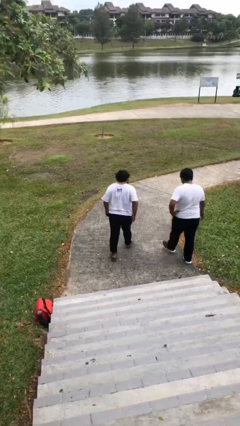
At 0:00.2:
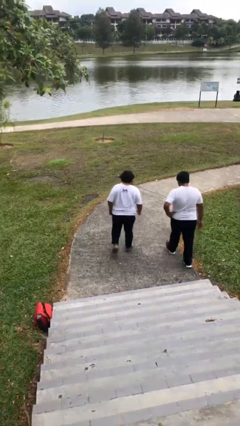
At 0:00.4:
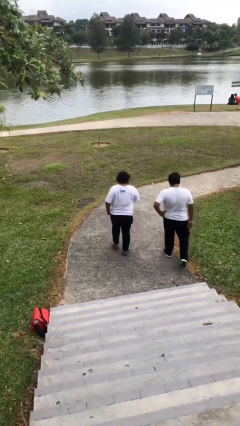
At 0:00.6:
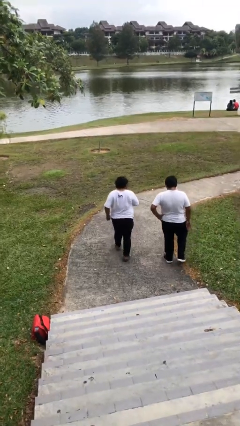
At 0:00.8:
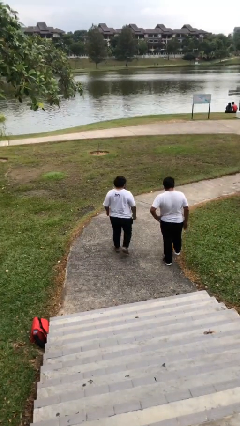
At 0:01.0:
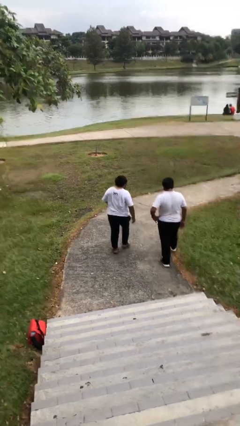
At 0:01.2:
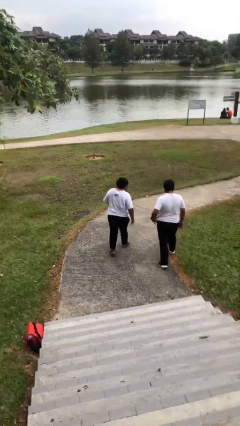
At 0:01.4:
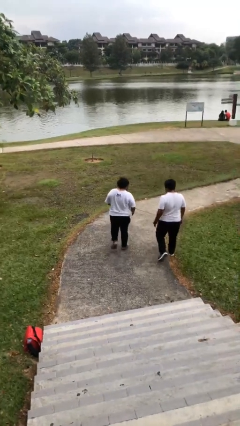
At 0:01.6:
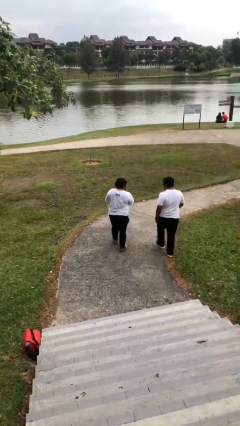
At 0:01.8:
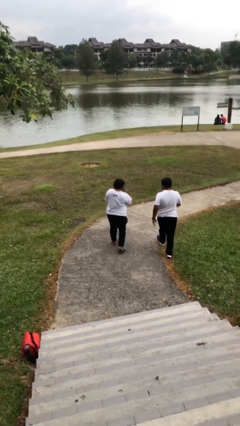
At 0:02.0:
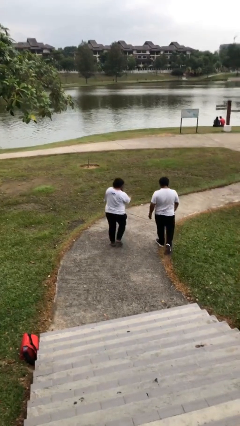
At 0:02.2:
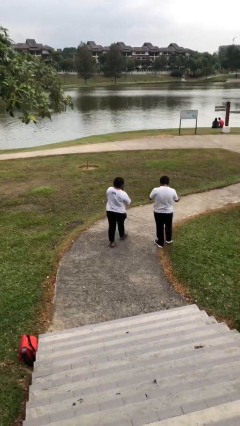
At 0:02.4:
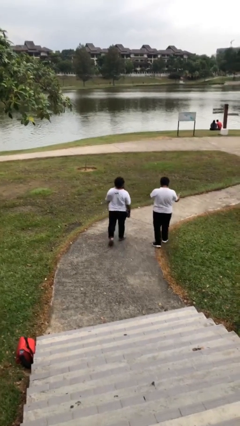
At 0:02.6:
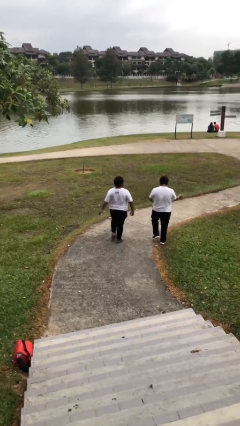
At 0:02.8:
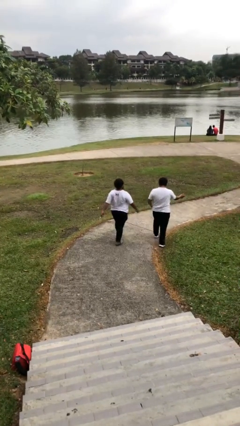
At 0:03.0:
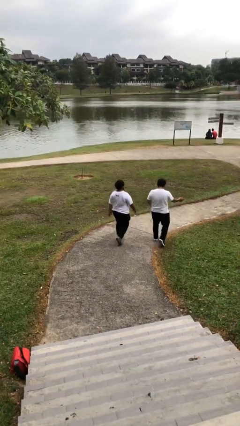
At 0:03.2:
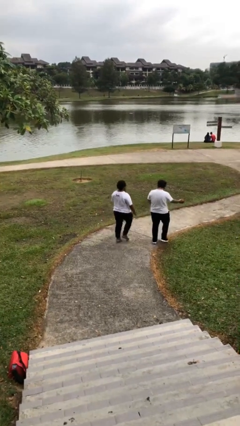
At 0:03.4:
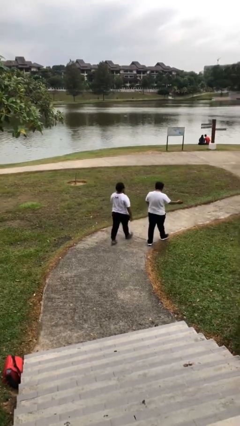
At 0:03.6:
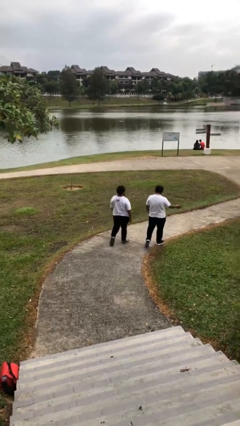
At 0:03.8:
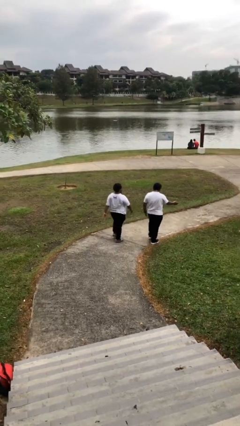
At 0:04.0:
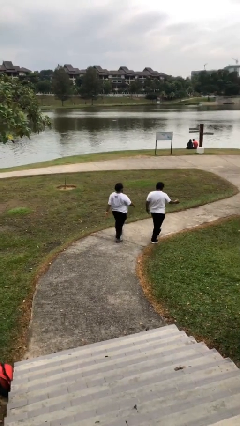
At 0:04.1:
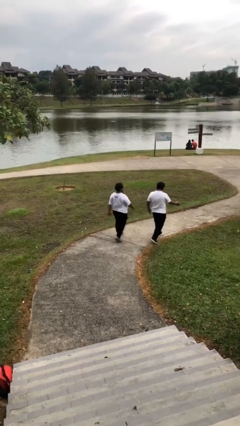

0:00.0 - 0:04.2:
person talks to person

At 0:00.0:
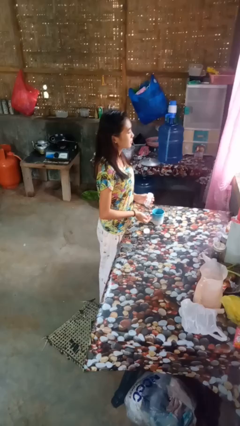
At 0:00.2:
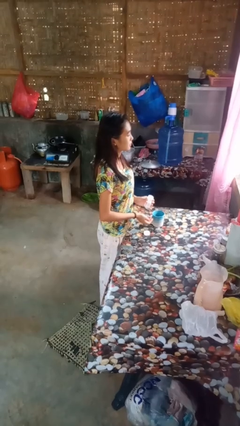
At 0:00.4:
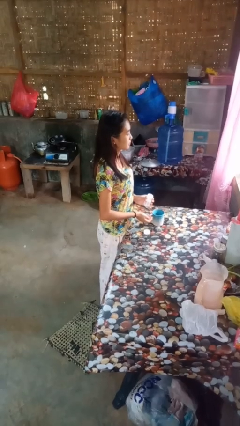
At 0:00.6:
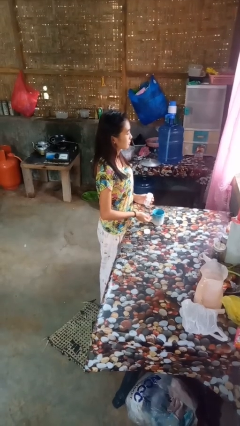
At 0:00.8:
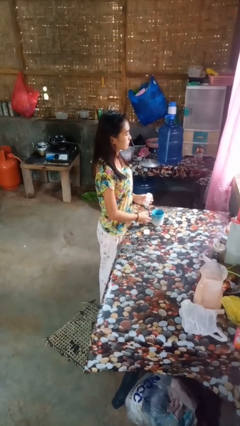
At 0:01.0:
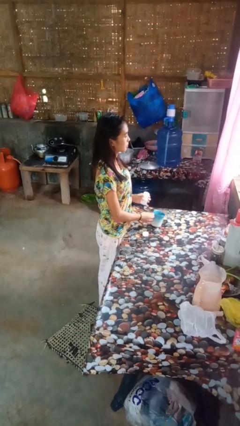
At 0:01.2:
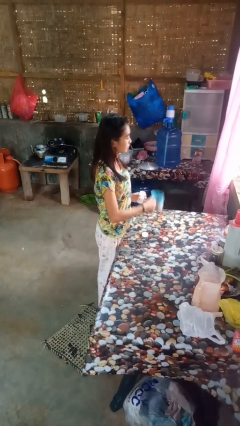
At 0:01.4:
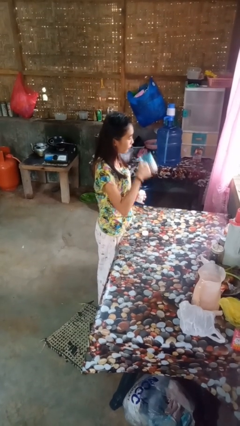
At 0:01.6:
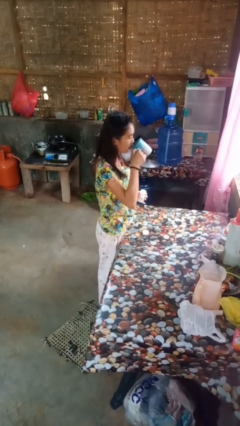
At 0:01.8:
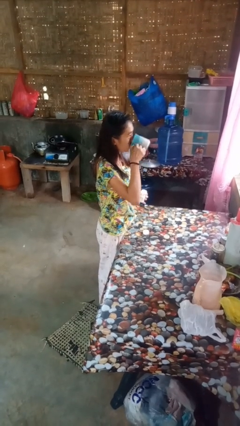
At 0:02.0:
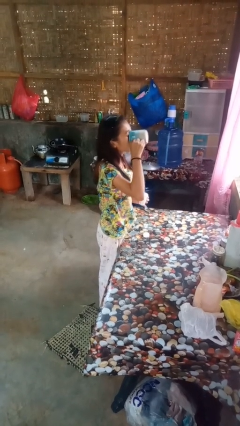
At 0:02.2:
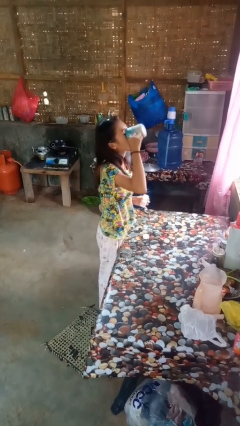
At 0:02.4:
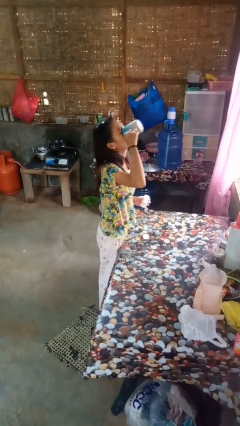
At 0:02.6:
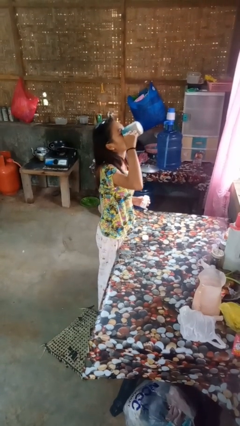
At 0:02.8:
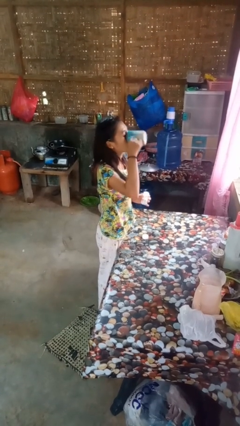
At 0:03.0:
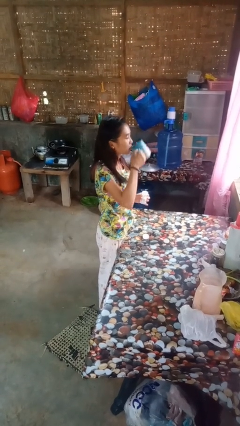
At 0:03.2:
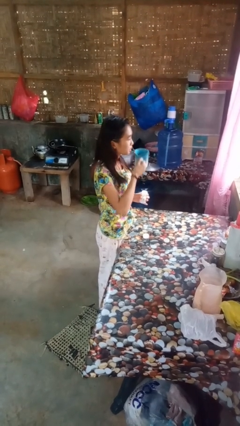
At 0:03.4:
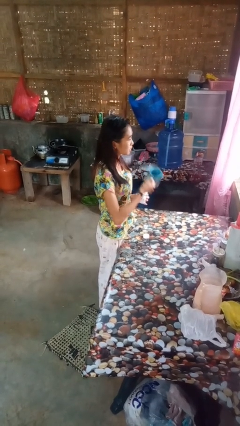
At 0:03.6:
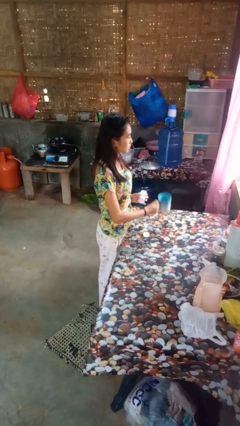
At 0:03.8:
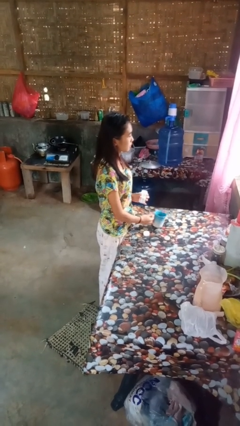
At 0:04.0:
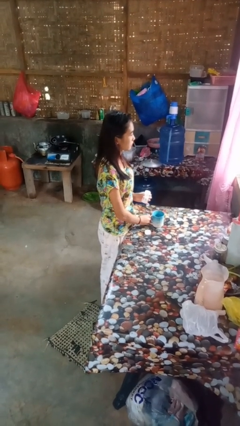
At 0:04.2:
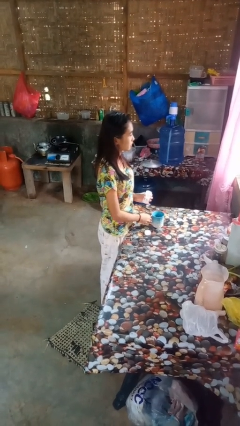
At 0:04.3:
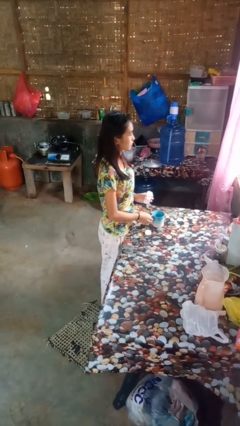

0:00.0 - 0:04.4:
person drinks from cup

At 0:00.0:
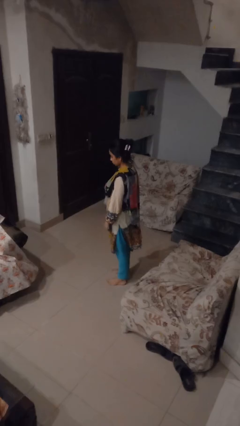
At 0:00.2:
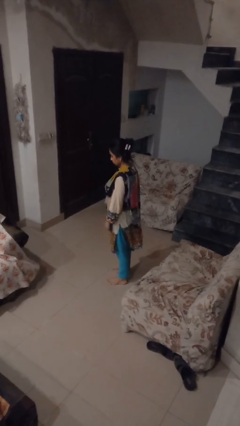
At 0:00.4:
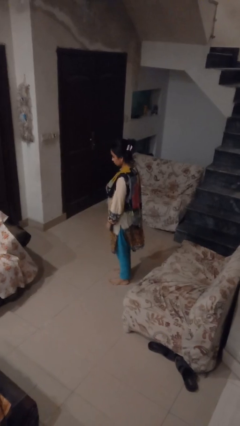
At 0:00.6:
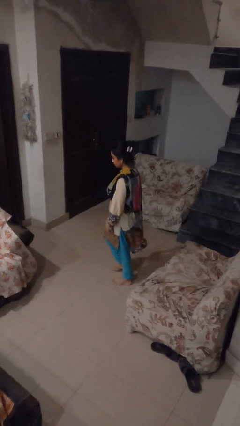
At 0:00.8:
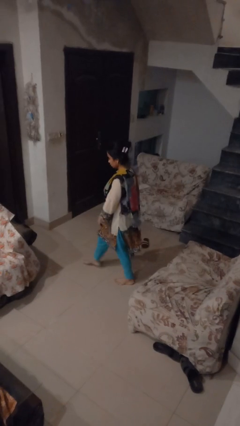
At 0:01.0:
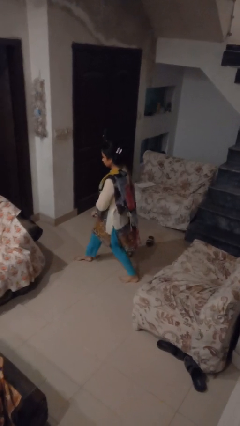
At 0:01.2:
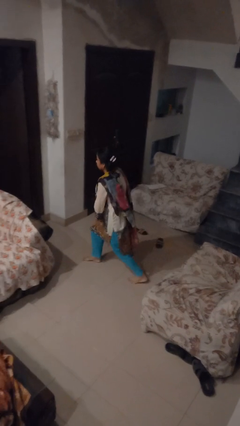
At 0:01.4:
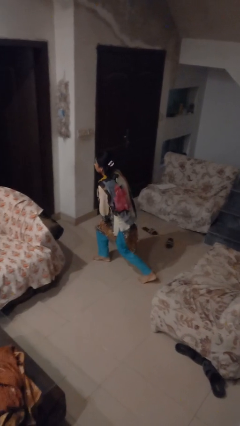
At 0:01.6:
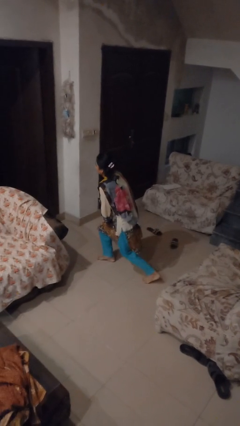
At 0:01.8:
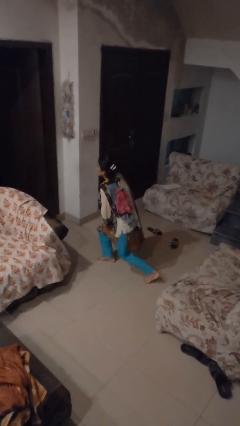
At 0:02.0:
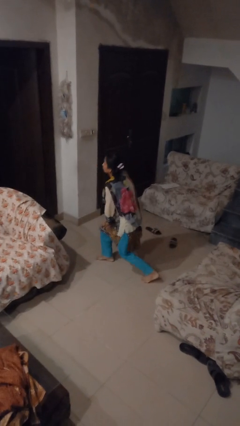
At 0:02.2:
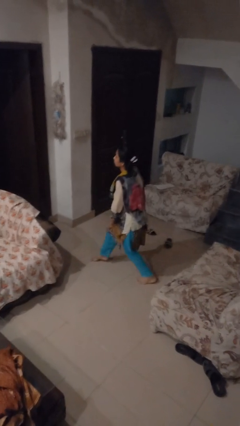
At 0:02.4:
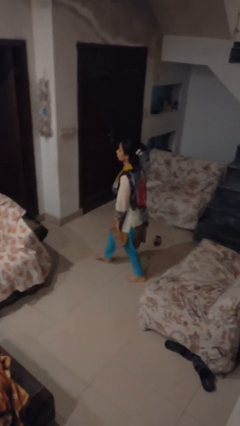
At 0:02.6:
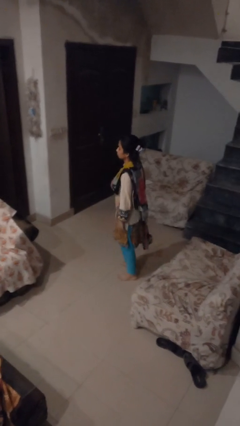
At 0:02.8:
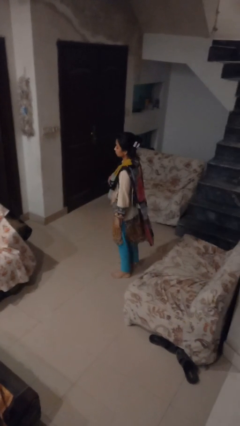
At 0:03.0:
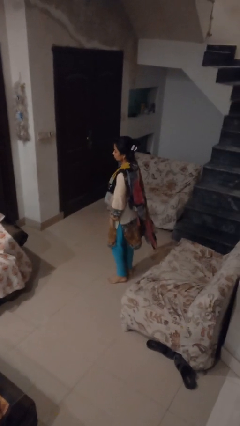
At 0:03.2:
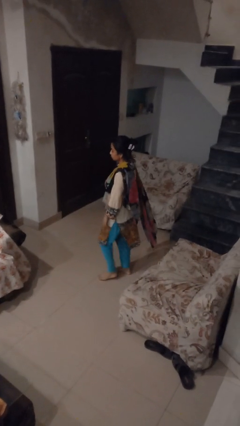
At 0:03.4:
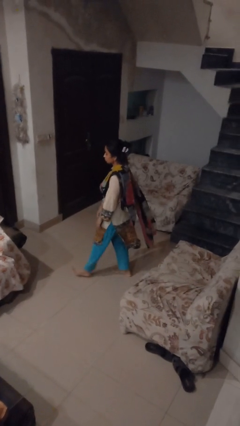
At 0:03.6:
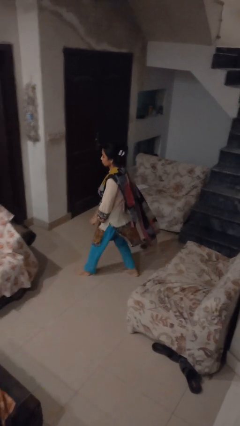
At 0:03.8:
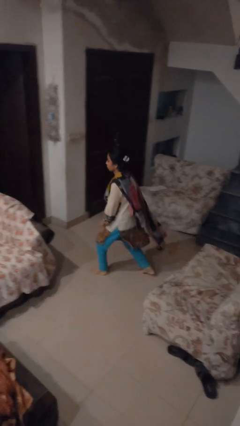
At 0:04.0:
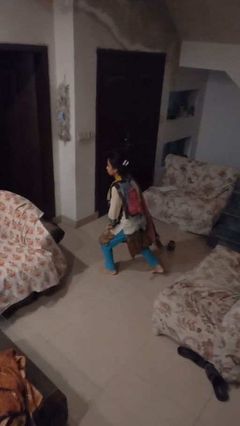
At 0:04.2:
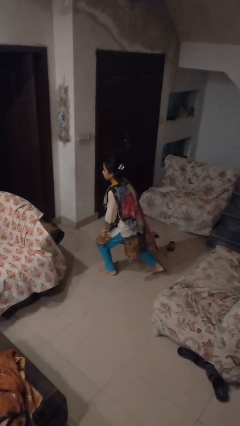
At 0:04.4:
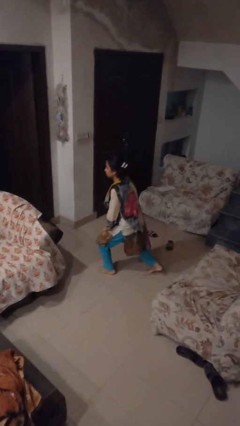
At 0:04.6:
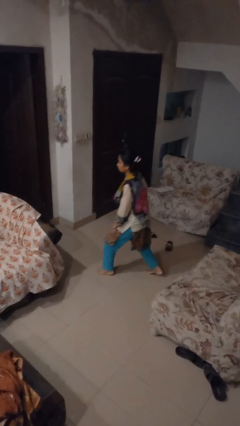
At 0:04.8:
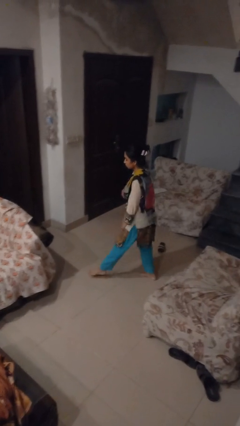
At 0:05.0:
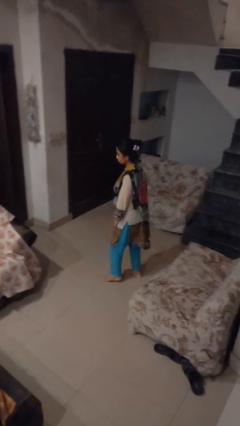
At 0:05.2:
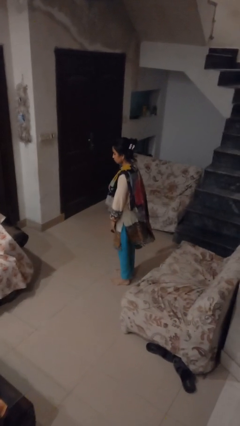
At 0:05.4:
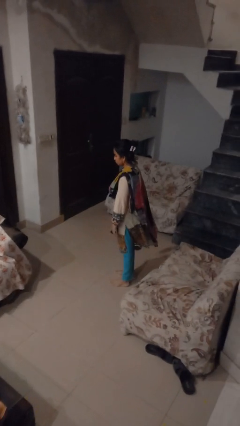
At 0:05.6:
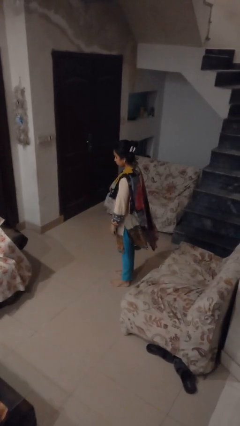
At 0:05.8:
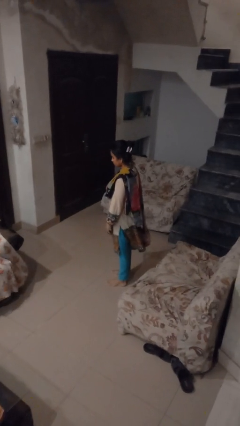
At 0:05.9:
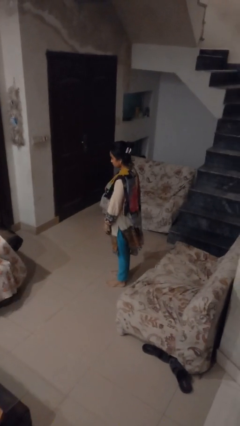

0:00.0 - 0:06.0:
person exercises with lunges

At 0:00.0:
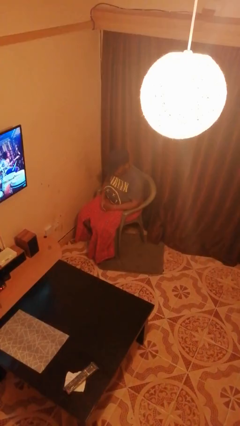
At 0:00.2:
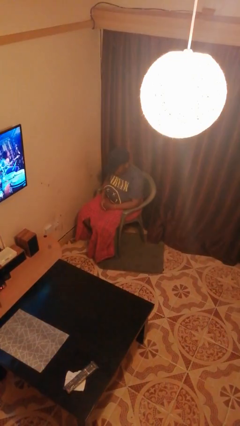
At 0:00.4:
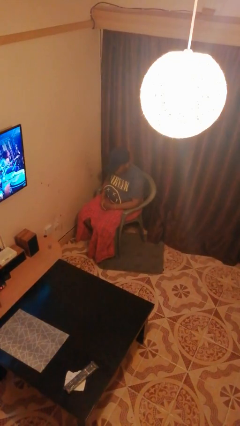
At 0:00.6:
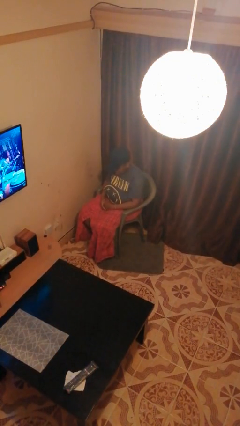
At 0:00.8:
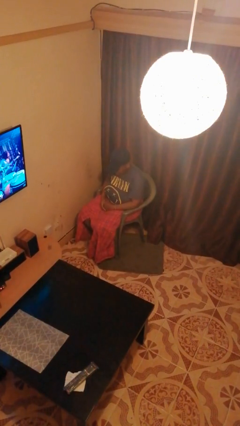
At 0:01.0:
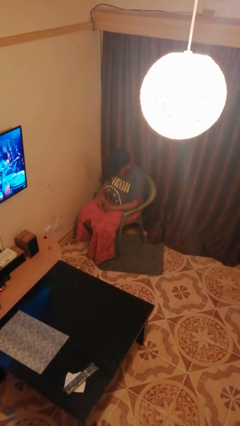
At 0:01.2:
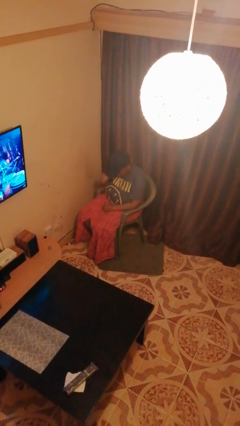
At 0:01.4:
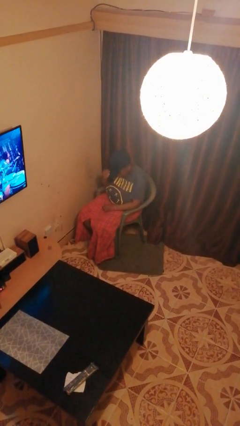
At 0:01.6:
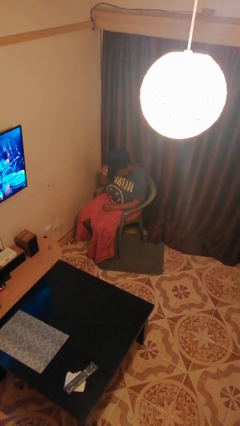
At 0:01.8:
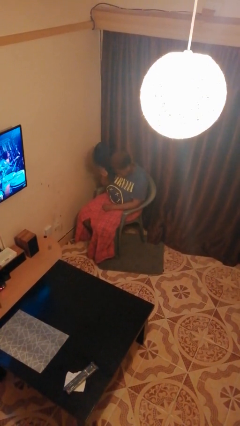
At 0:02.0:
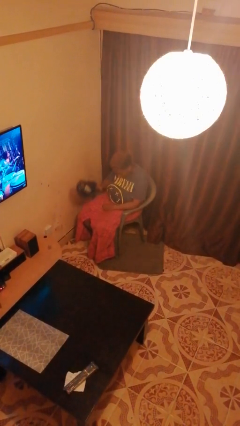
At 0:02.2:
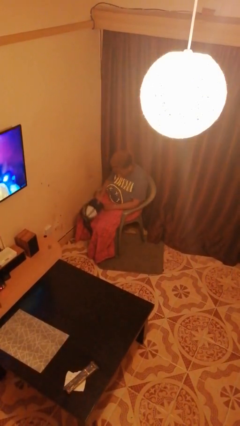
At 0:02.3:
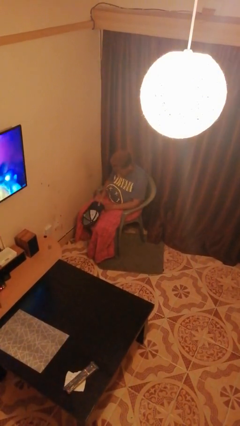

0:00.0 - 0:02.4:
person takes off hat

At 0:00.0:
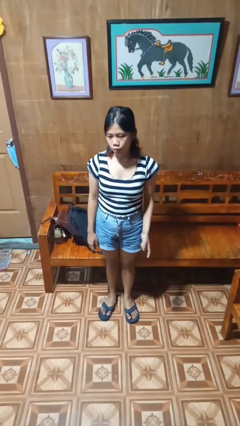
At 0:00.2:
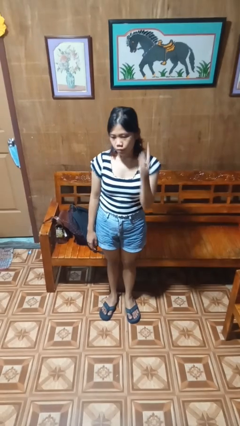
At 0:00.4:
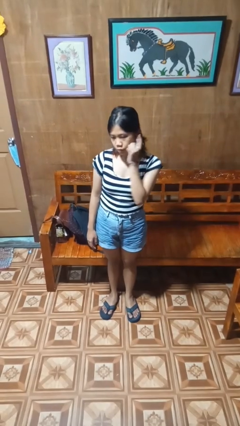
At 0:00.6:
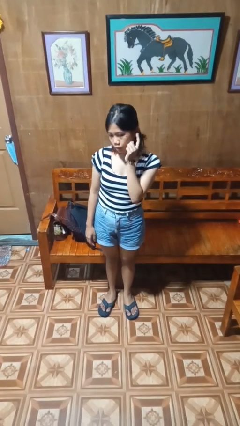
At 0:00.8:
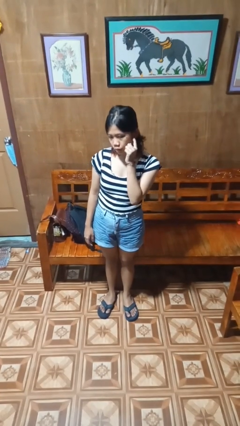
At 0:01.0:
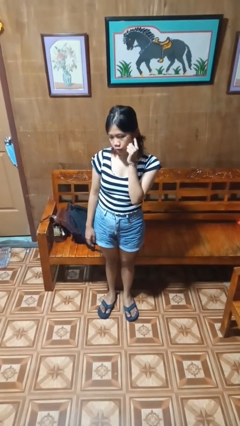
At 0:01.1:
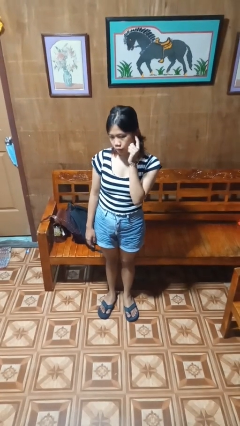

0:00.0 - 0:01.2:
person gestures listen closely
